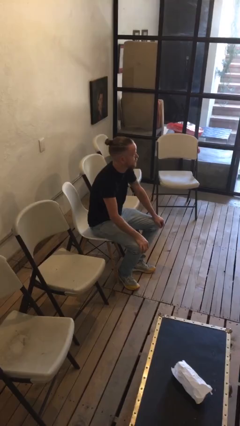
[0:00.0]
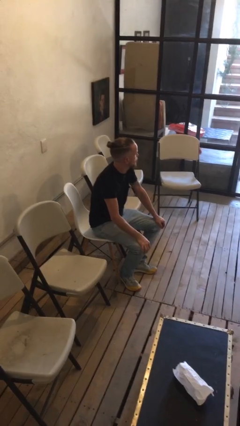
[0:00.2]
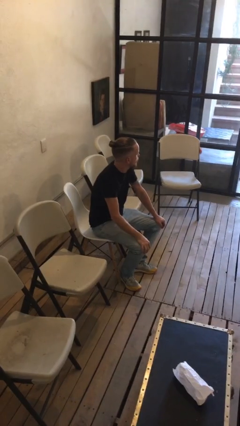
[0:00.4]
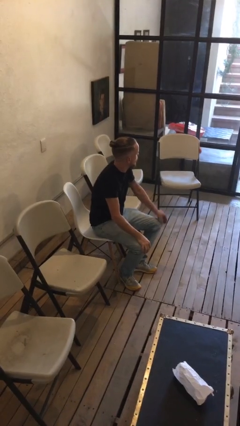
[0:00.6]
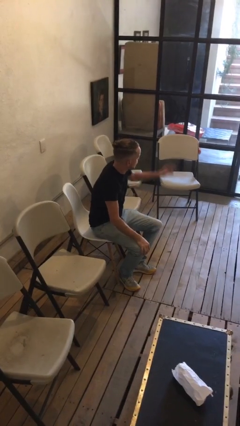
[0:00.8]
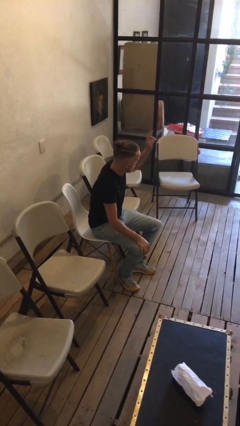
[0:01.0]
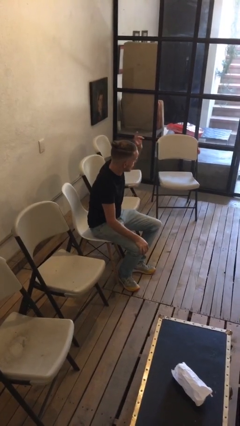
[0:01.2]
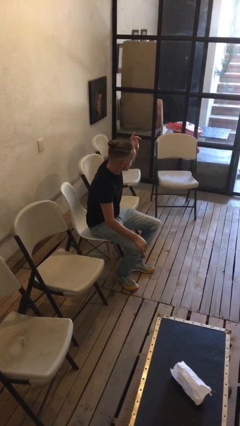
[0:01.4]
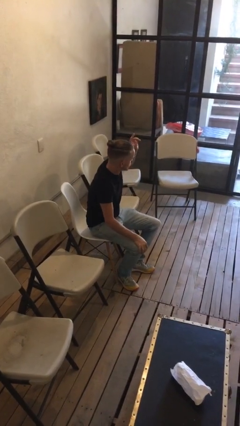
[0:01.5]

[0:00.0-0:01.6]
person gestures raise hand

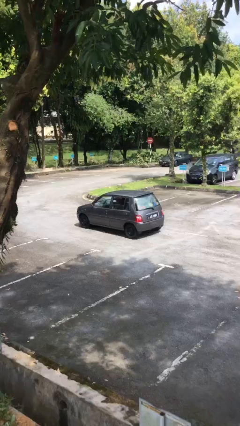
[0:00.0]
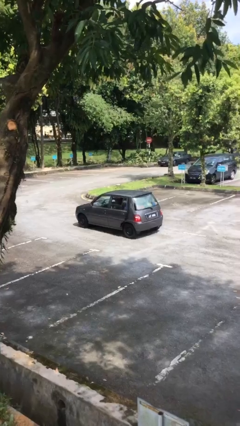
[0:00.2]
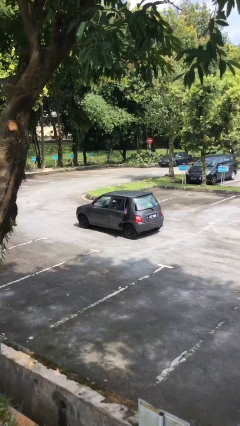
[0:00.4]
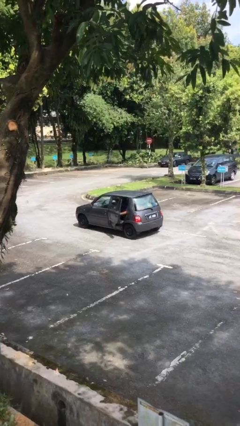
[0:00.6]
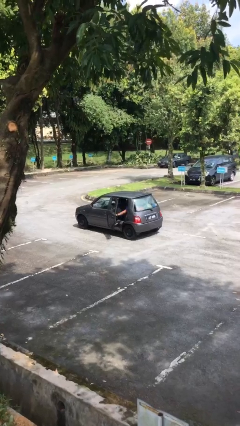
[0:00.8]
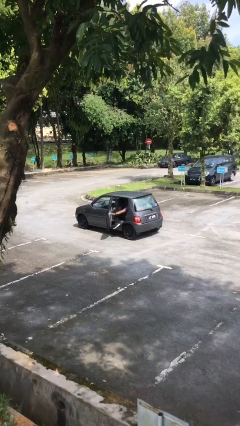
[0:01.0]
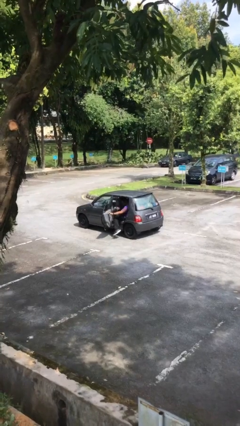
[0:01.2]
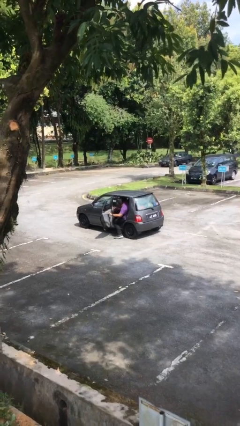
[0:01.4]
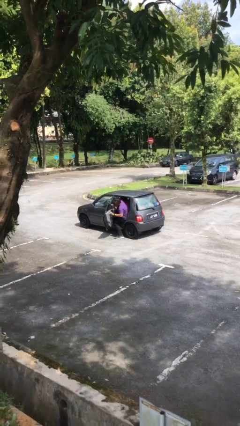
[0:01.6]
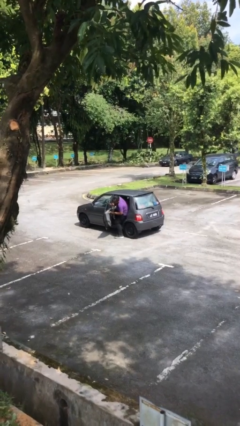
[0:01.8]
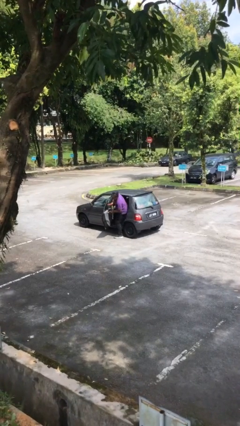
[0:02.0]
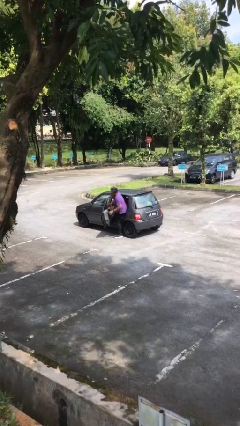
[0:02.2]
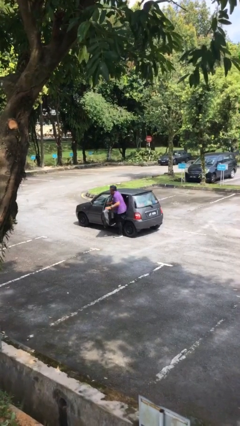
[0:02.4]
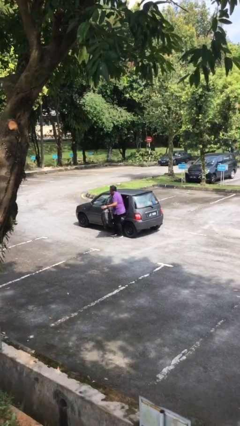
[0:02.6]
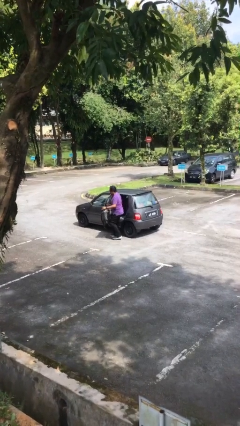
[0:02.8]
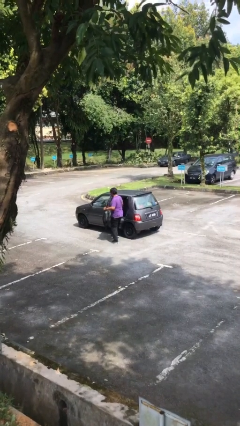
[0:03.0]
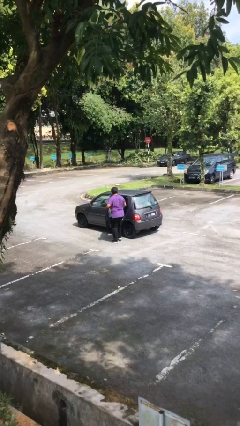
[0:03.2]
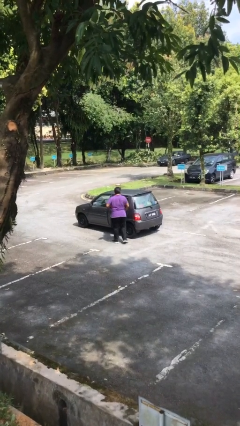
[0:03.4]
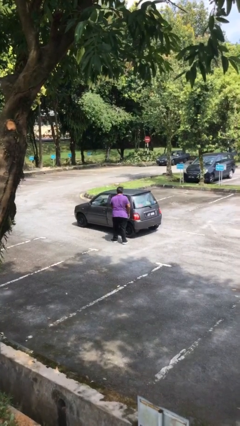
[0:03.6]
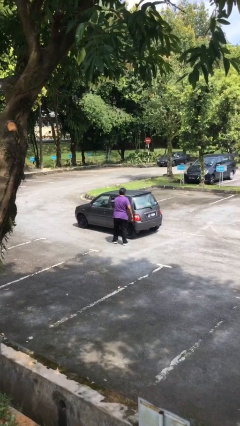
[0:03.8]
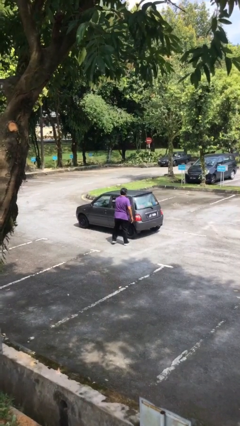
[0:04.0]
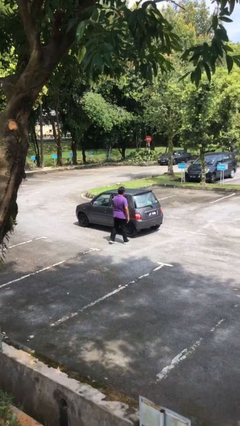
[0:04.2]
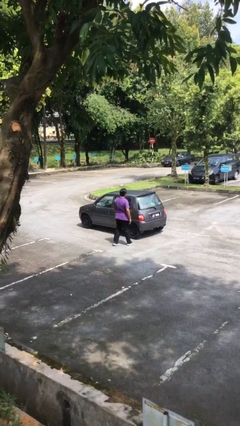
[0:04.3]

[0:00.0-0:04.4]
car drops off person

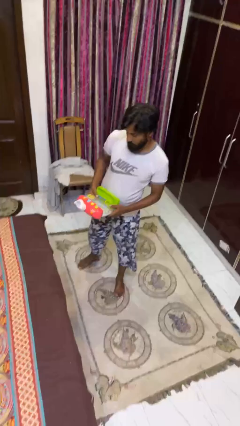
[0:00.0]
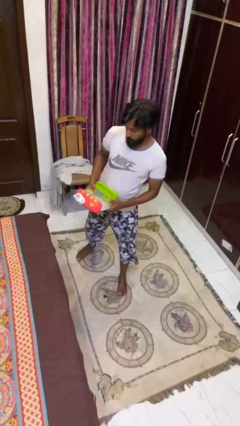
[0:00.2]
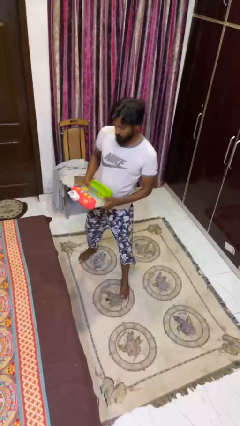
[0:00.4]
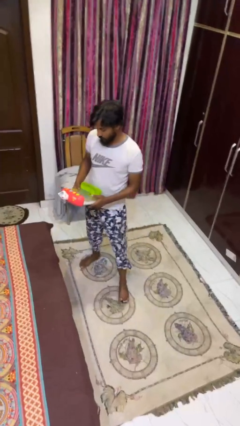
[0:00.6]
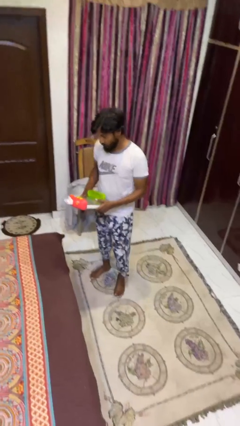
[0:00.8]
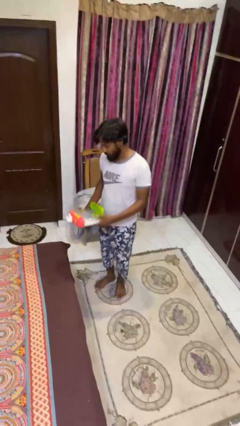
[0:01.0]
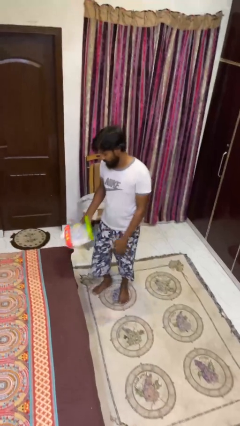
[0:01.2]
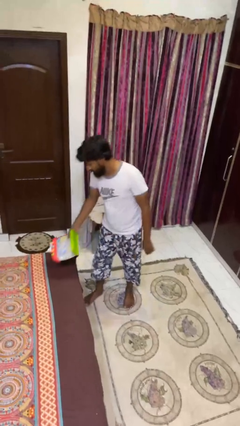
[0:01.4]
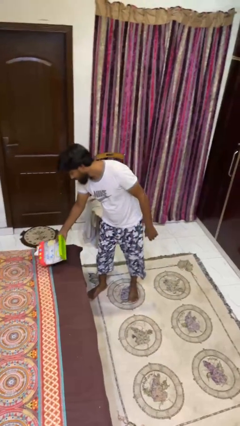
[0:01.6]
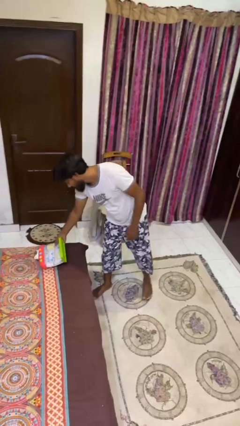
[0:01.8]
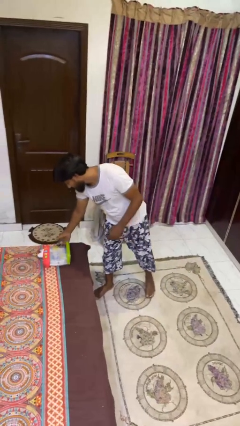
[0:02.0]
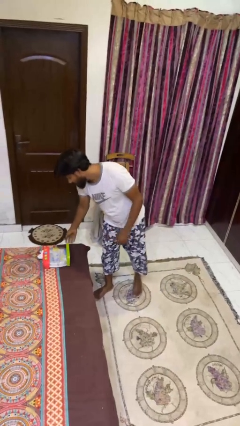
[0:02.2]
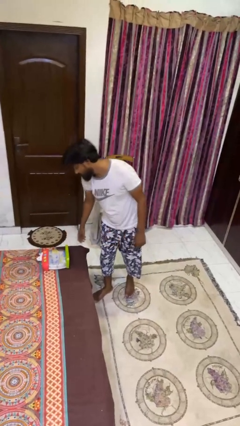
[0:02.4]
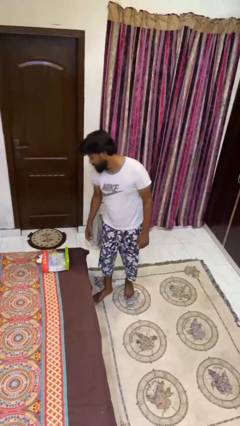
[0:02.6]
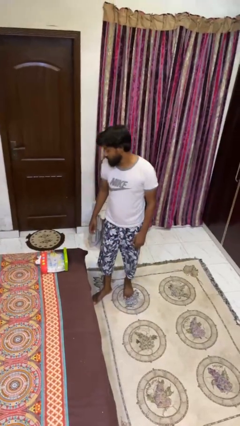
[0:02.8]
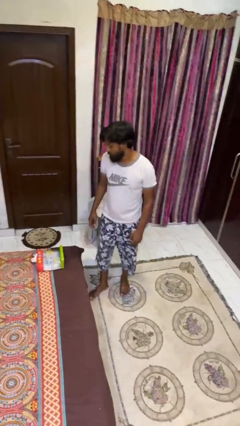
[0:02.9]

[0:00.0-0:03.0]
person puts down object on bed

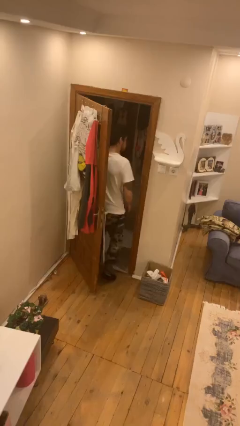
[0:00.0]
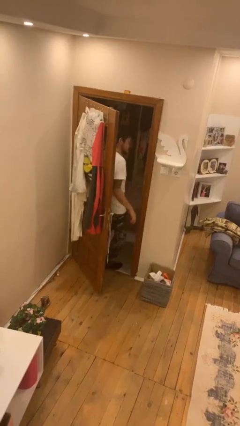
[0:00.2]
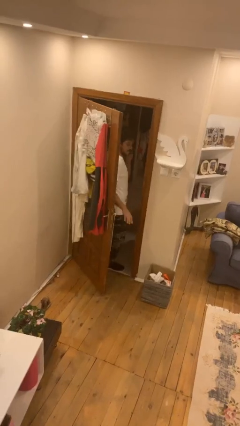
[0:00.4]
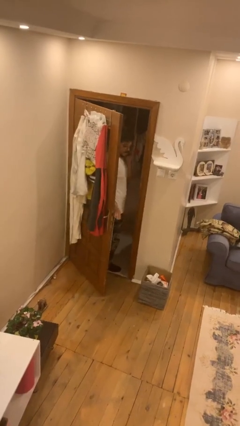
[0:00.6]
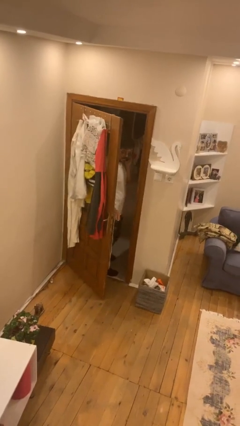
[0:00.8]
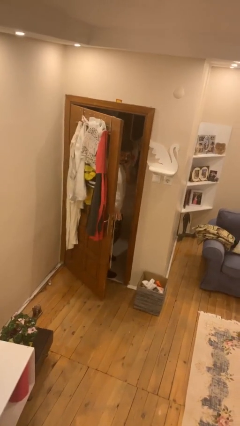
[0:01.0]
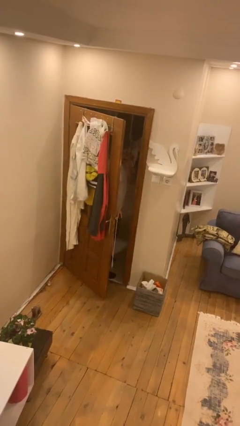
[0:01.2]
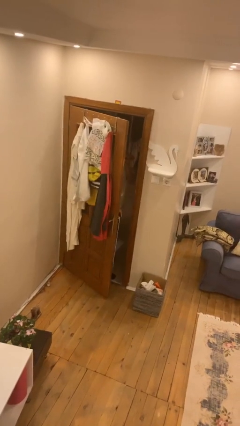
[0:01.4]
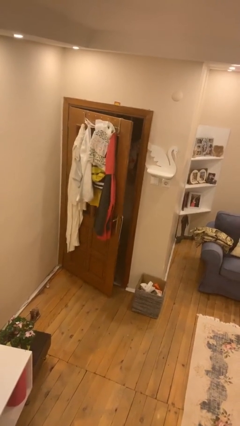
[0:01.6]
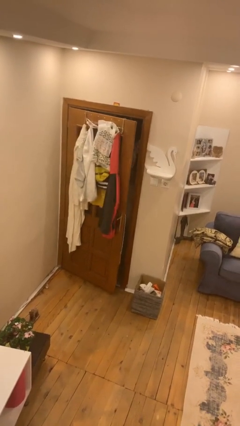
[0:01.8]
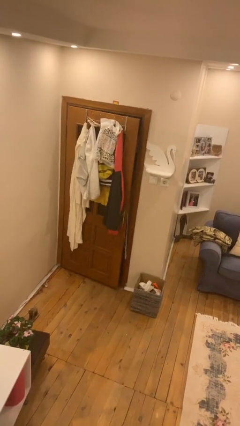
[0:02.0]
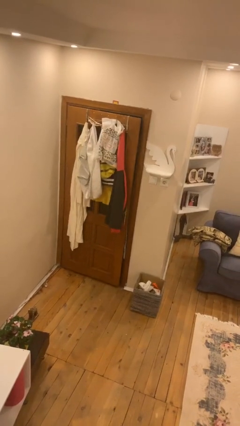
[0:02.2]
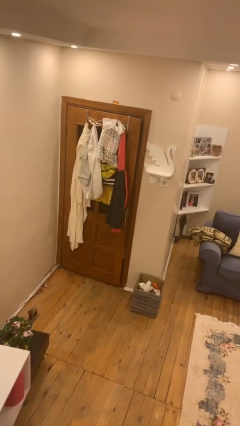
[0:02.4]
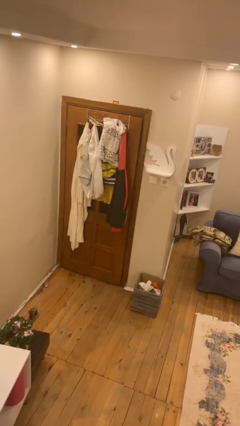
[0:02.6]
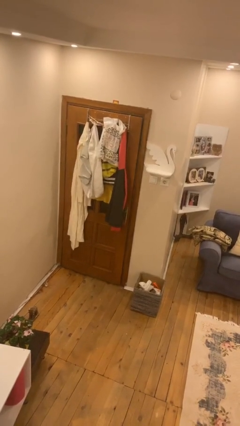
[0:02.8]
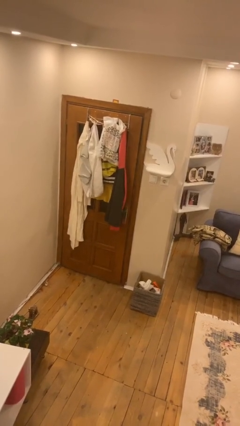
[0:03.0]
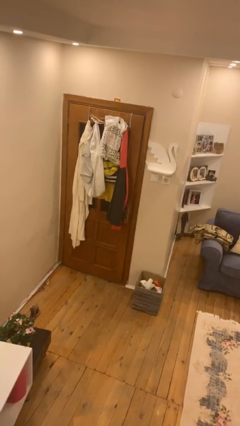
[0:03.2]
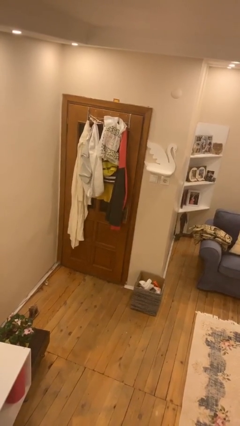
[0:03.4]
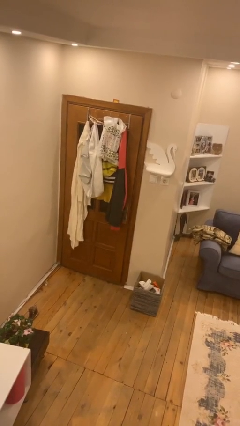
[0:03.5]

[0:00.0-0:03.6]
person closes facility door

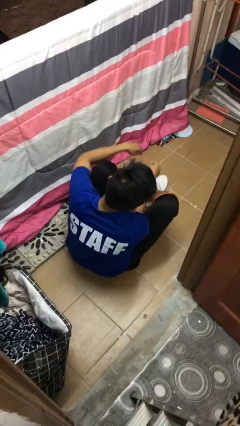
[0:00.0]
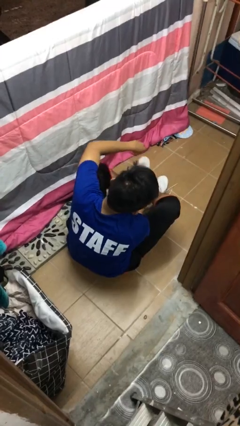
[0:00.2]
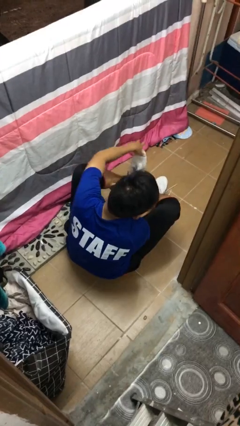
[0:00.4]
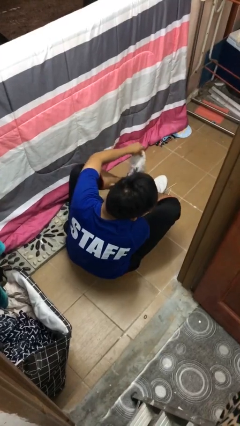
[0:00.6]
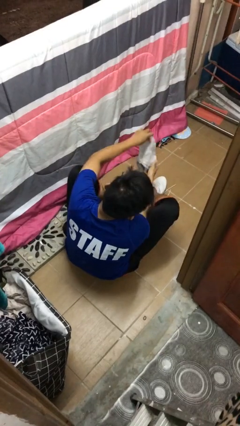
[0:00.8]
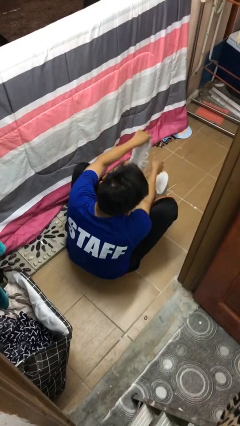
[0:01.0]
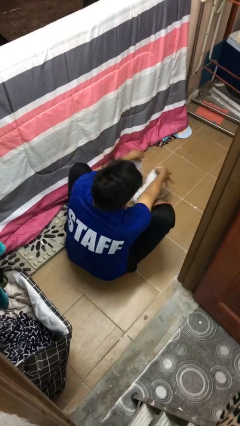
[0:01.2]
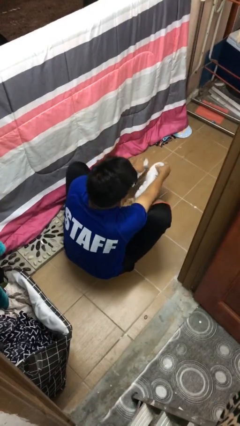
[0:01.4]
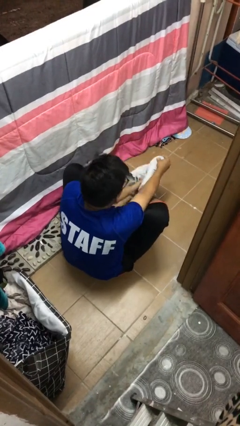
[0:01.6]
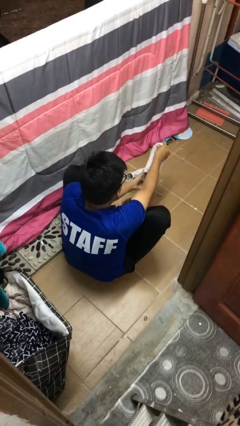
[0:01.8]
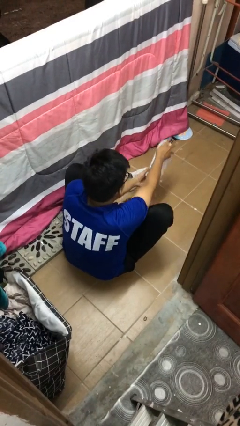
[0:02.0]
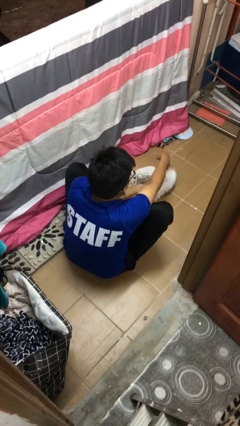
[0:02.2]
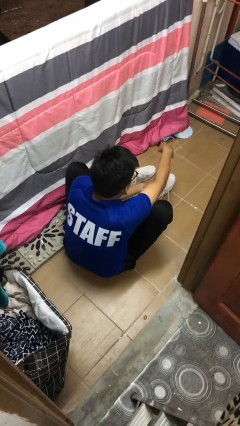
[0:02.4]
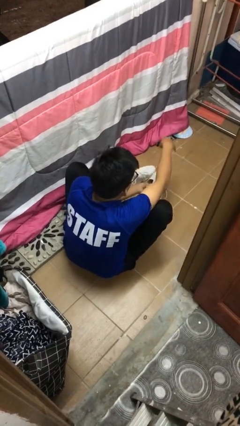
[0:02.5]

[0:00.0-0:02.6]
person takes off shoes

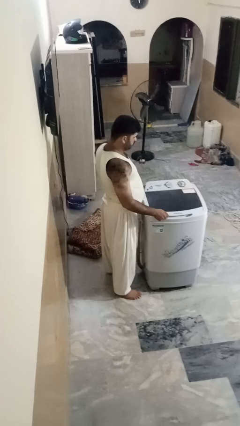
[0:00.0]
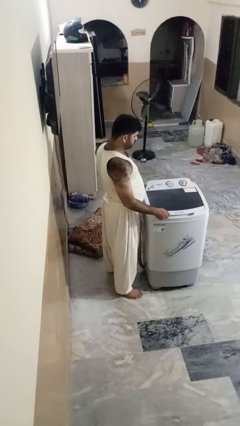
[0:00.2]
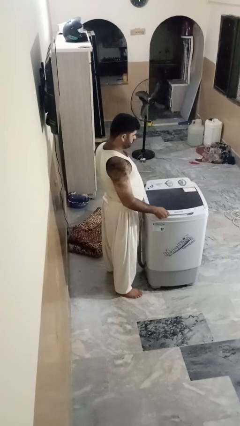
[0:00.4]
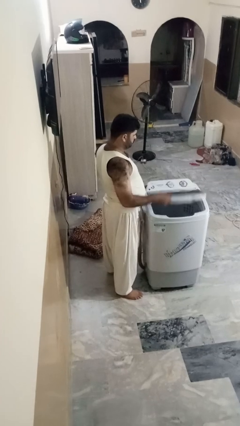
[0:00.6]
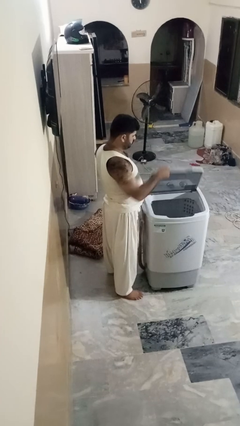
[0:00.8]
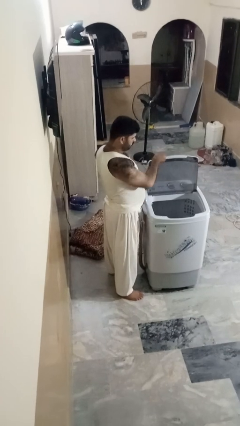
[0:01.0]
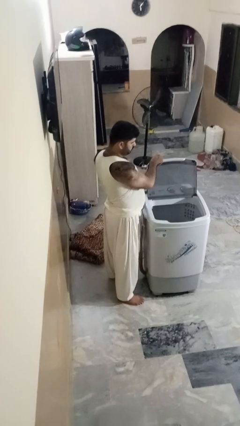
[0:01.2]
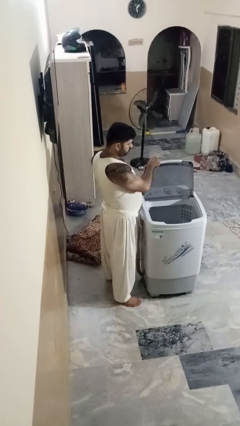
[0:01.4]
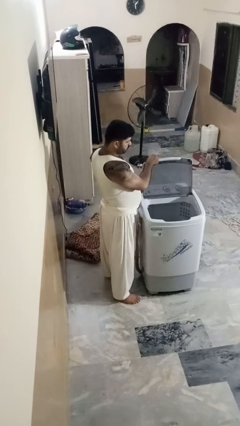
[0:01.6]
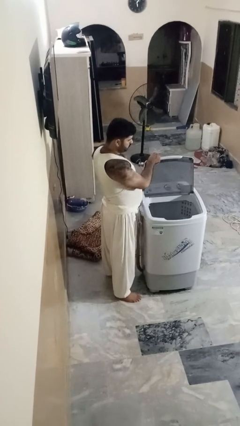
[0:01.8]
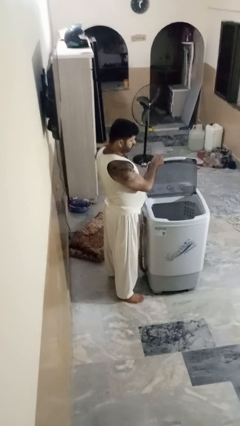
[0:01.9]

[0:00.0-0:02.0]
person opens clothes washer
